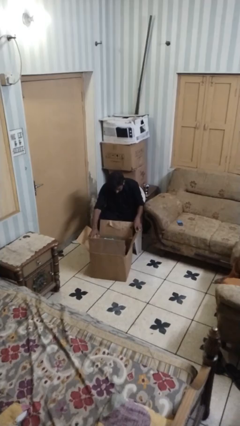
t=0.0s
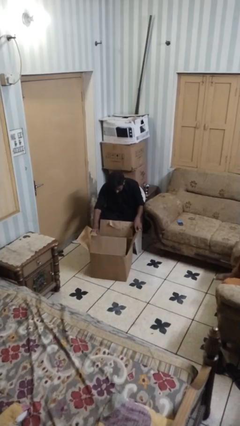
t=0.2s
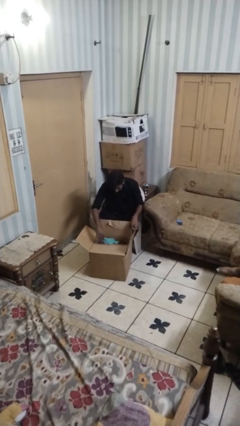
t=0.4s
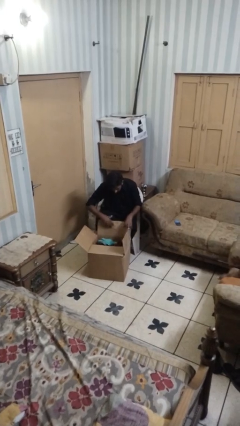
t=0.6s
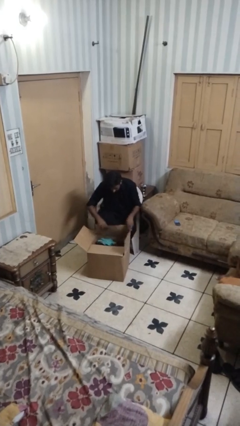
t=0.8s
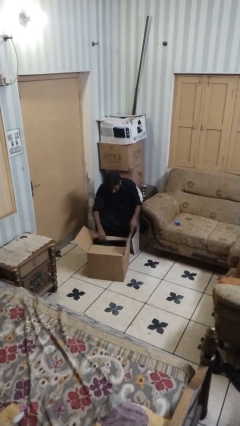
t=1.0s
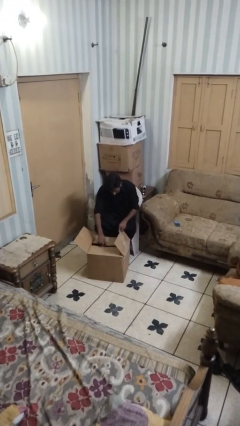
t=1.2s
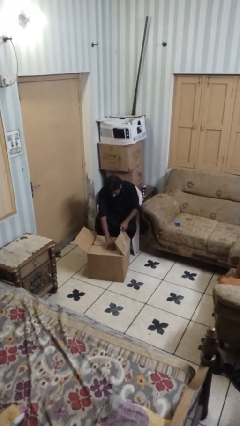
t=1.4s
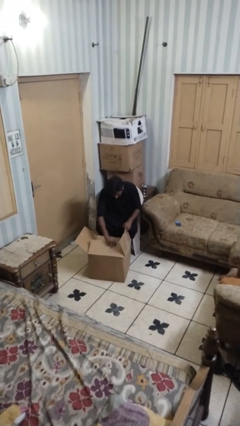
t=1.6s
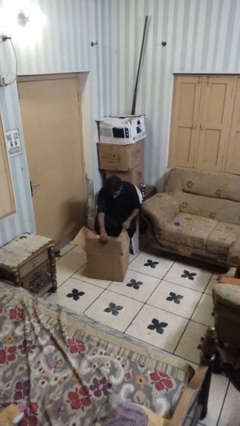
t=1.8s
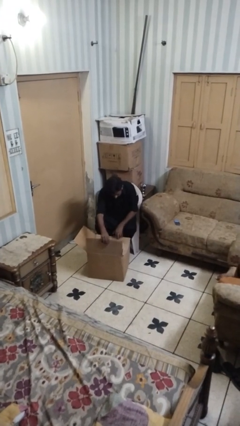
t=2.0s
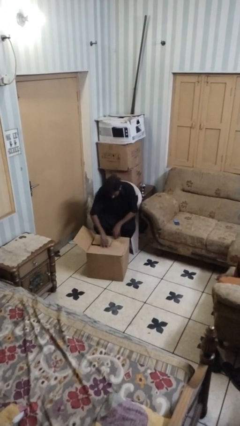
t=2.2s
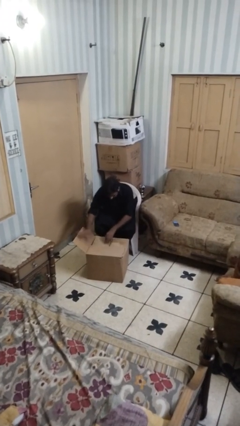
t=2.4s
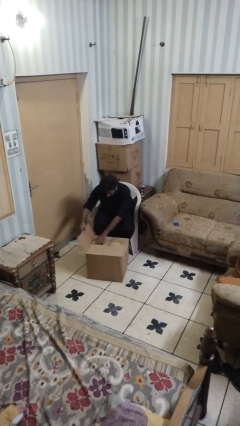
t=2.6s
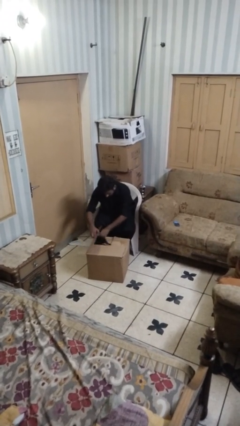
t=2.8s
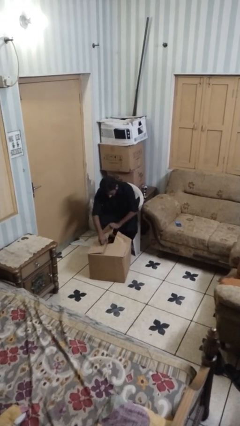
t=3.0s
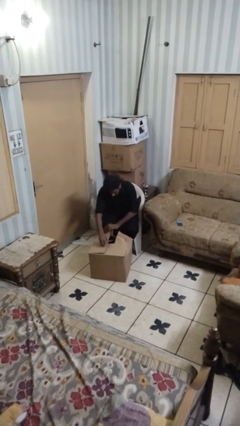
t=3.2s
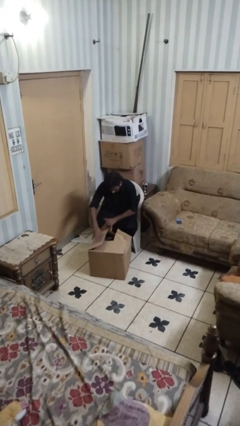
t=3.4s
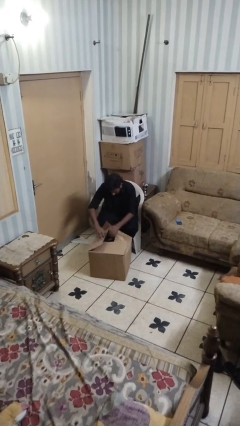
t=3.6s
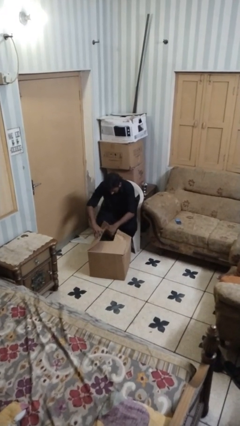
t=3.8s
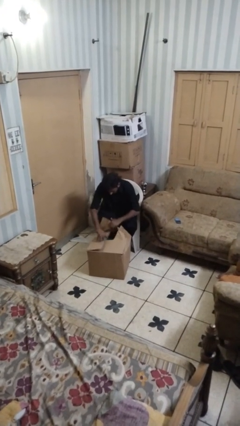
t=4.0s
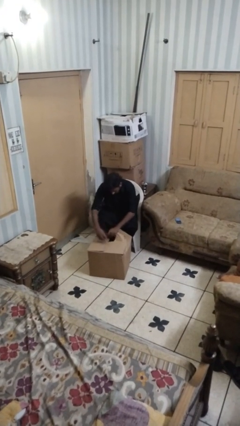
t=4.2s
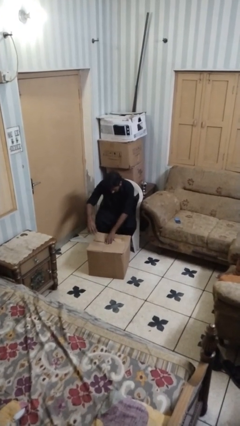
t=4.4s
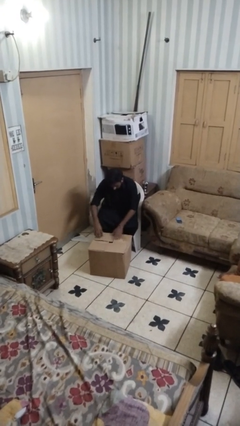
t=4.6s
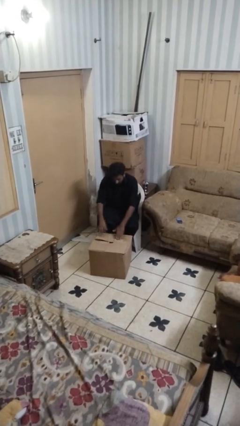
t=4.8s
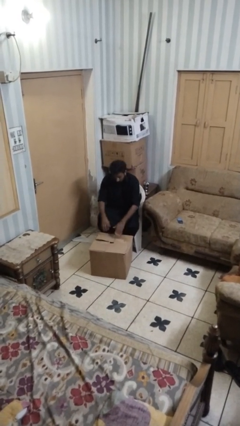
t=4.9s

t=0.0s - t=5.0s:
person closes box

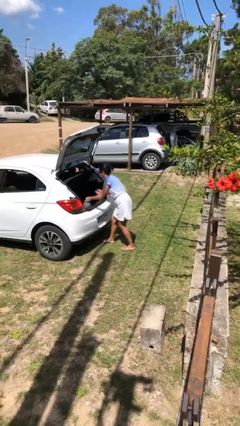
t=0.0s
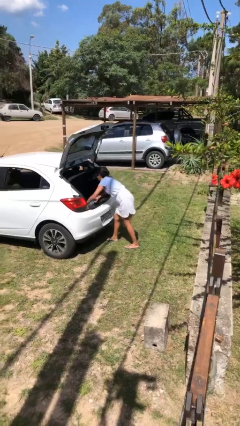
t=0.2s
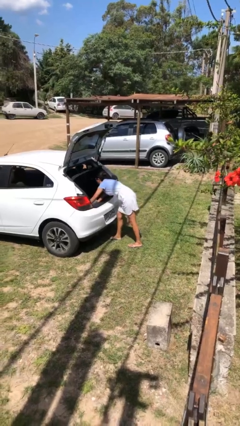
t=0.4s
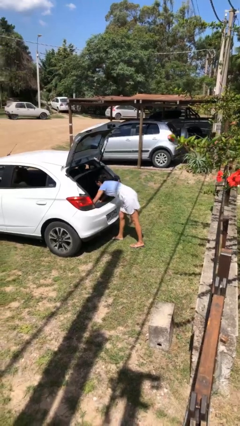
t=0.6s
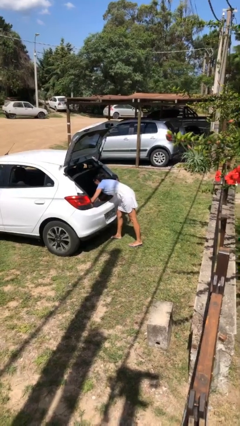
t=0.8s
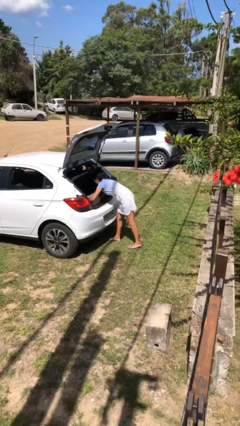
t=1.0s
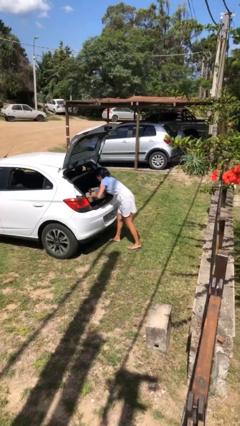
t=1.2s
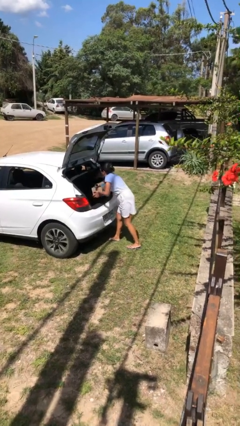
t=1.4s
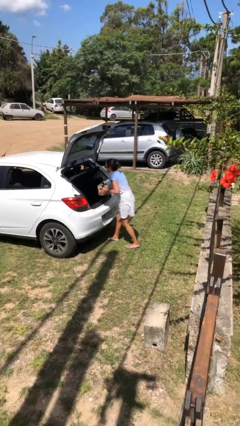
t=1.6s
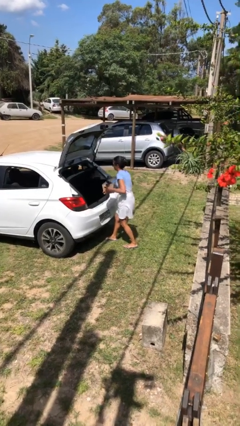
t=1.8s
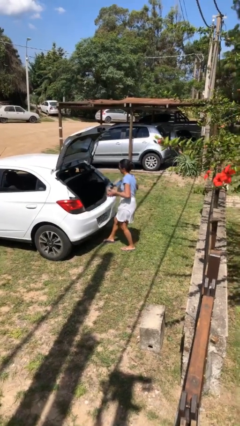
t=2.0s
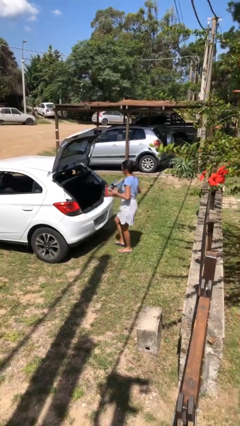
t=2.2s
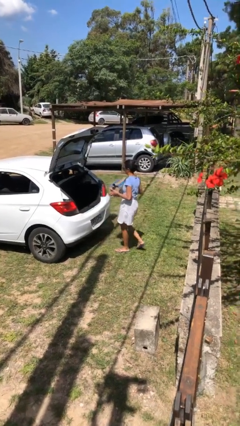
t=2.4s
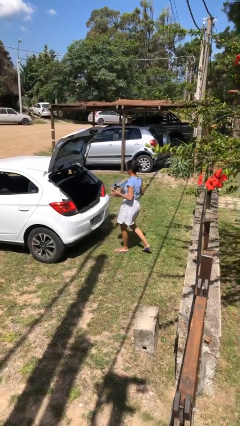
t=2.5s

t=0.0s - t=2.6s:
person unloads car

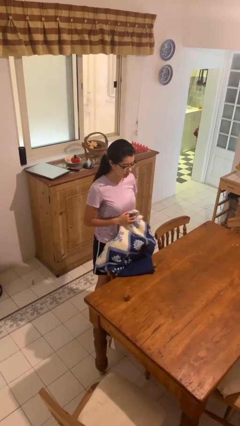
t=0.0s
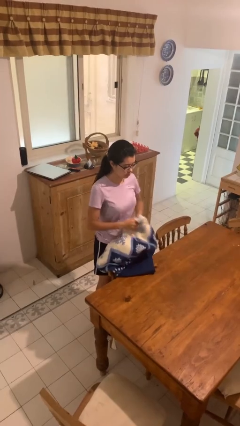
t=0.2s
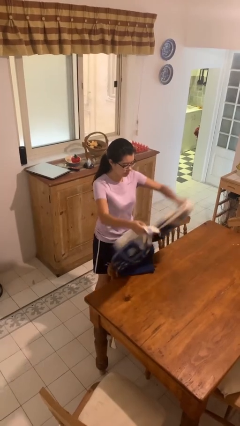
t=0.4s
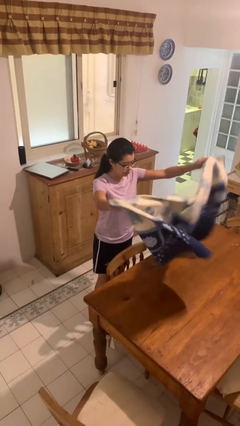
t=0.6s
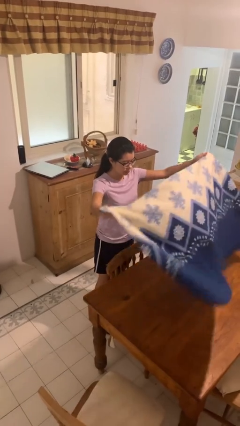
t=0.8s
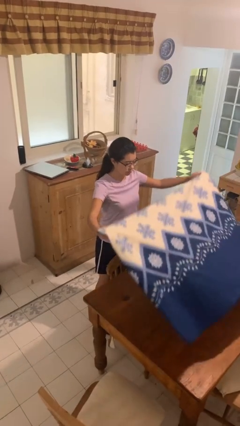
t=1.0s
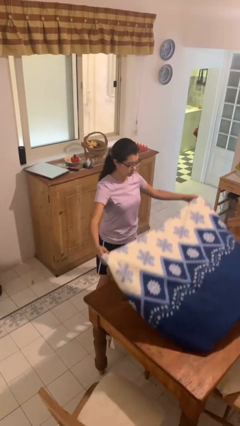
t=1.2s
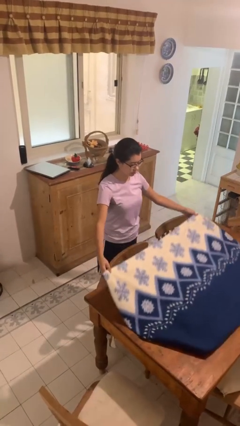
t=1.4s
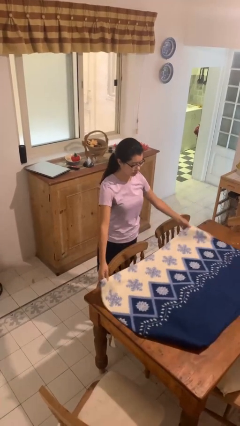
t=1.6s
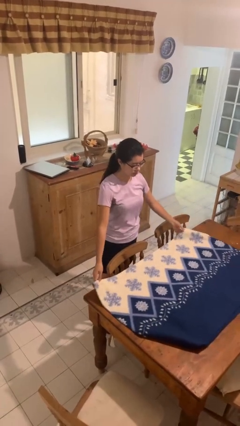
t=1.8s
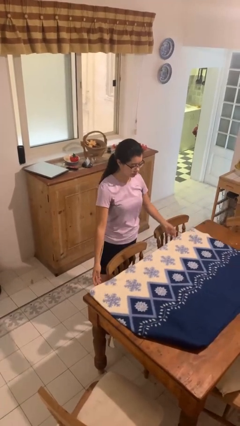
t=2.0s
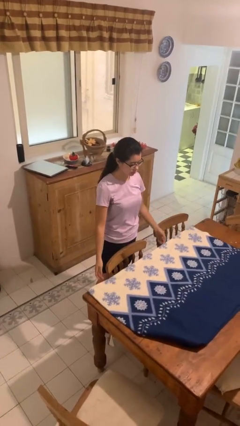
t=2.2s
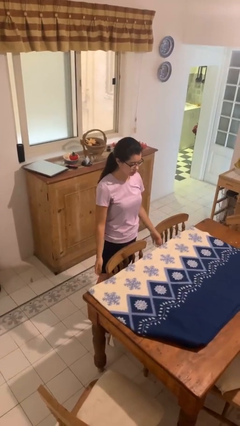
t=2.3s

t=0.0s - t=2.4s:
person spreads tablecloth

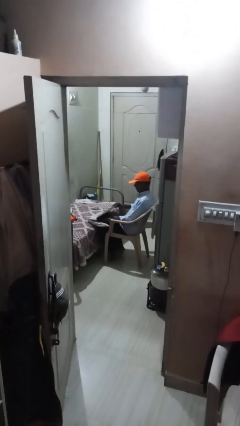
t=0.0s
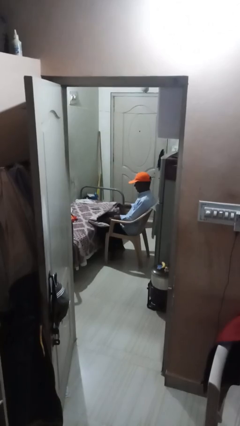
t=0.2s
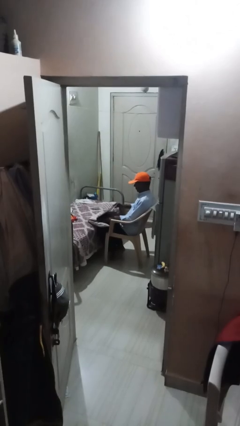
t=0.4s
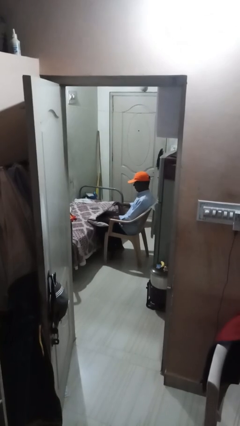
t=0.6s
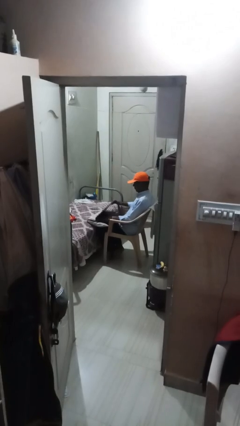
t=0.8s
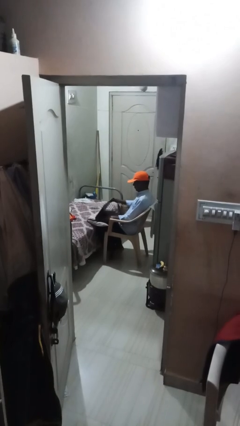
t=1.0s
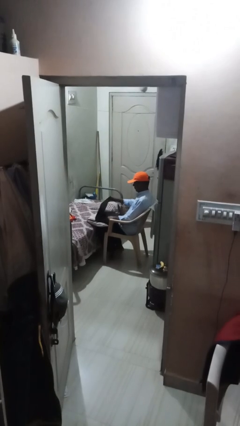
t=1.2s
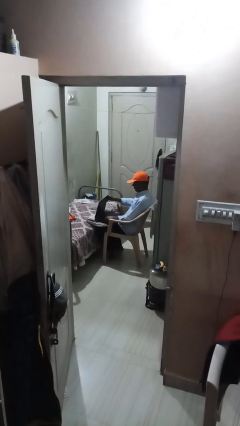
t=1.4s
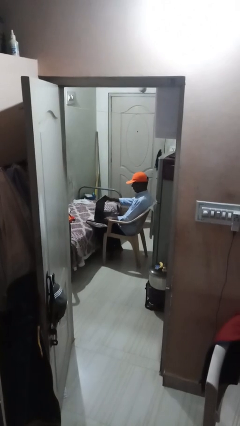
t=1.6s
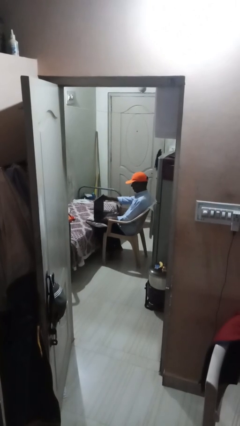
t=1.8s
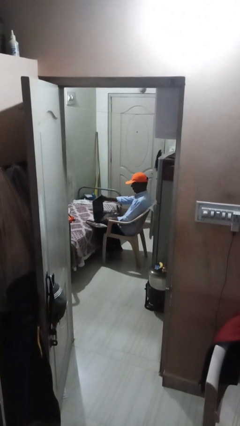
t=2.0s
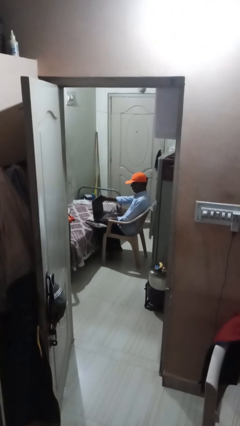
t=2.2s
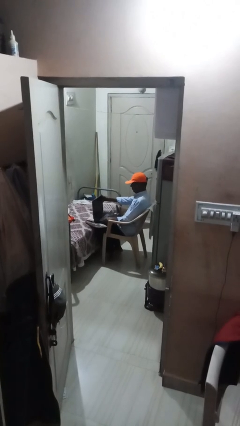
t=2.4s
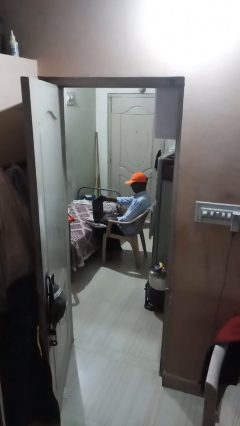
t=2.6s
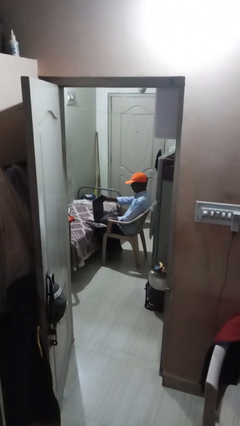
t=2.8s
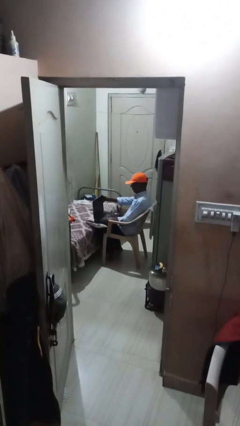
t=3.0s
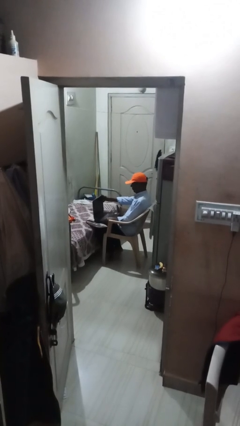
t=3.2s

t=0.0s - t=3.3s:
person interacts with laptop

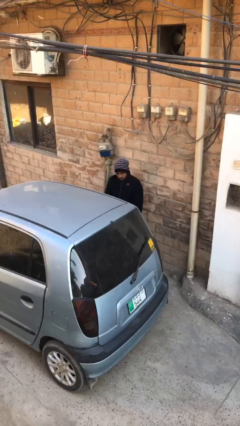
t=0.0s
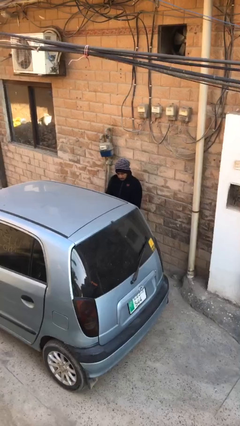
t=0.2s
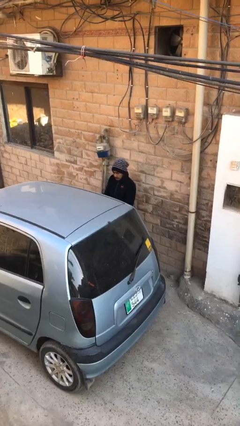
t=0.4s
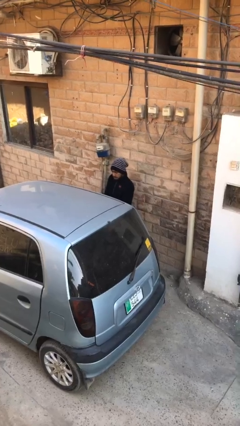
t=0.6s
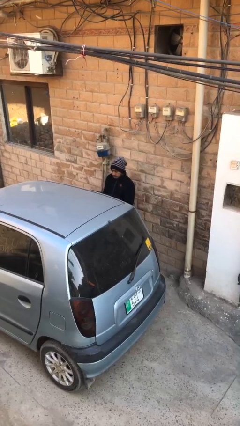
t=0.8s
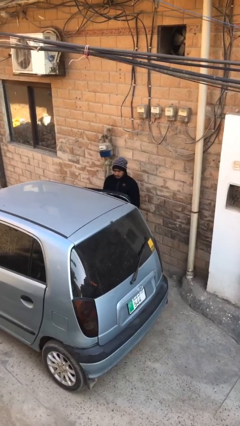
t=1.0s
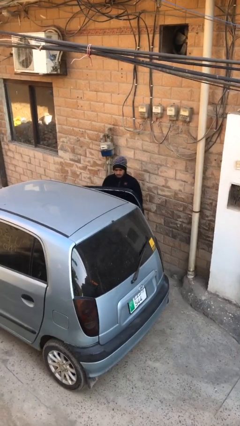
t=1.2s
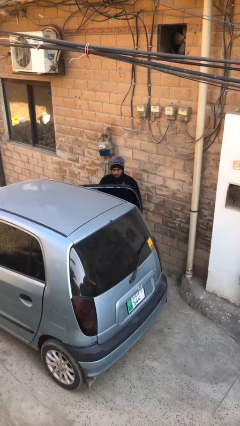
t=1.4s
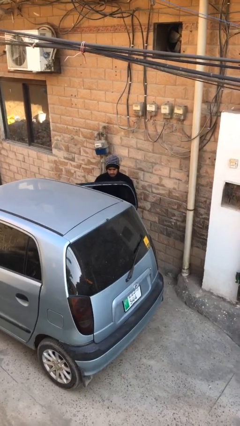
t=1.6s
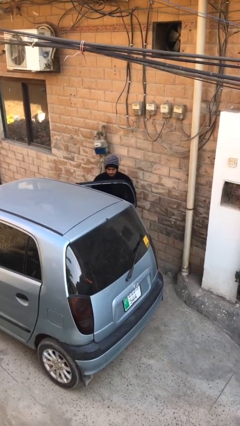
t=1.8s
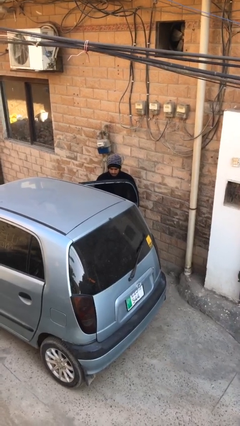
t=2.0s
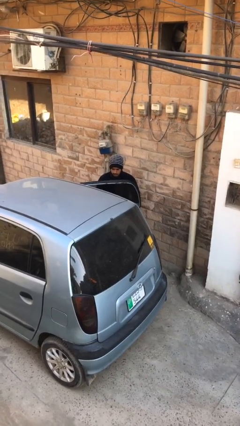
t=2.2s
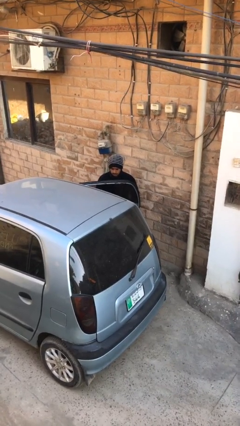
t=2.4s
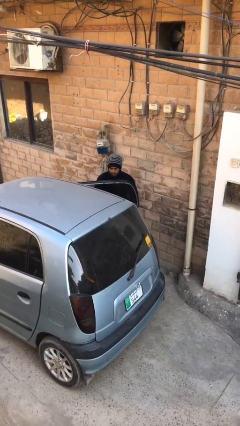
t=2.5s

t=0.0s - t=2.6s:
person opens car door

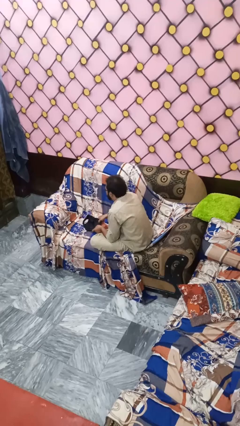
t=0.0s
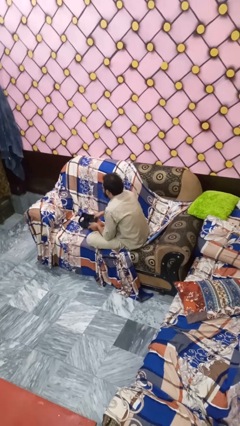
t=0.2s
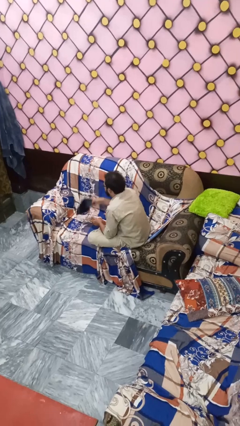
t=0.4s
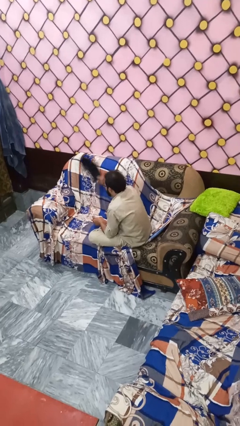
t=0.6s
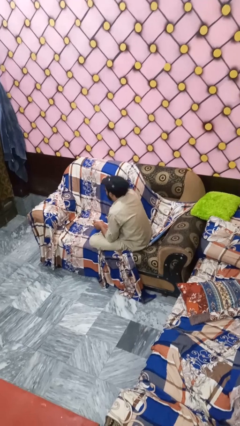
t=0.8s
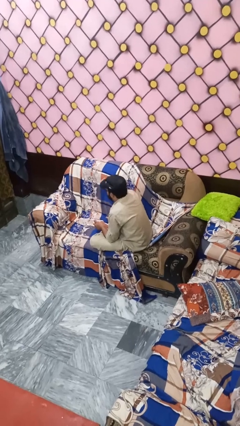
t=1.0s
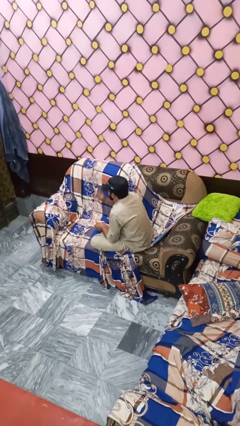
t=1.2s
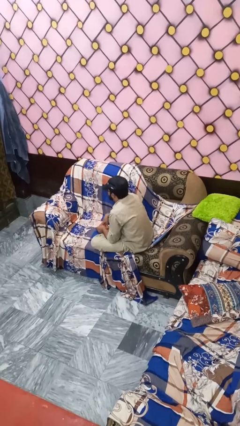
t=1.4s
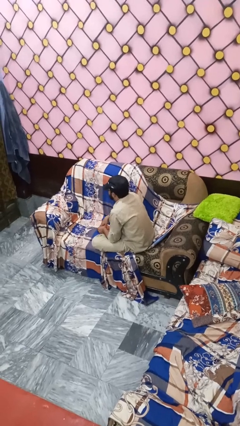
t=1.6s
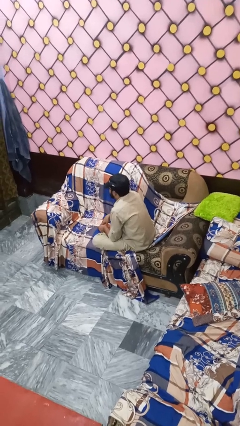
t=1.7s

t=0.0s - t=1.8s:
person holds object above head
